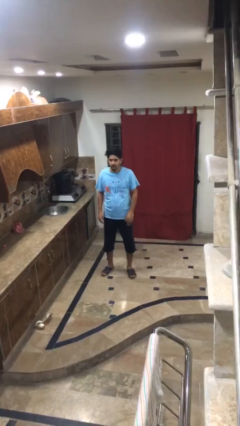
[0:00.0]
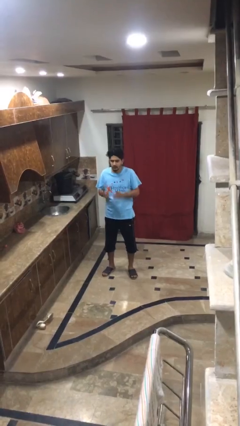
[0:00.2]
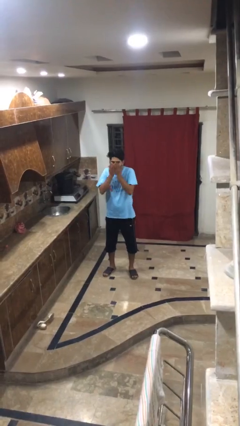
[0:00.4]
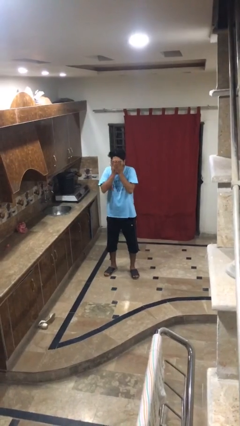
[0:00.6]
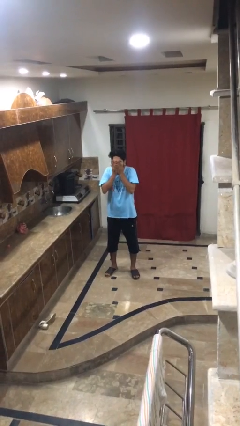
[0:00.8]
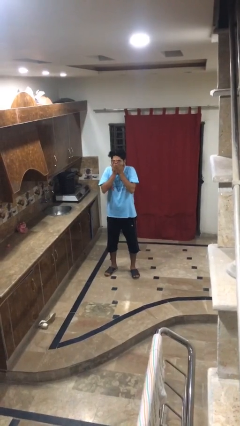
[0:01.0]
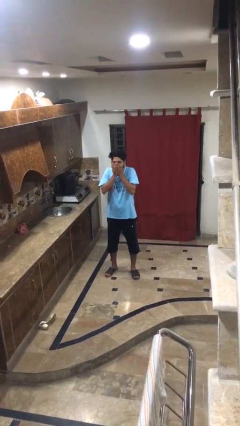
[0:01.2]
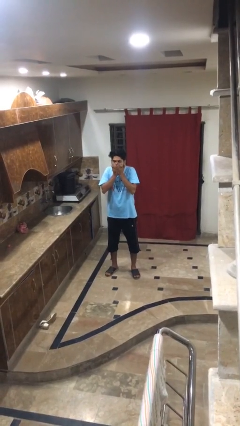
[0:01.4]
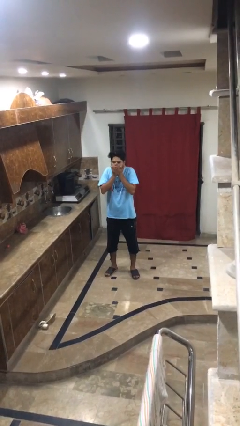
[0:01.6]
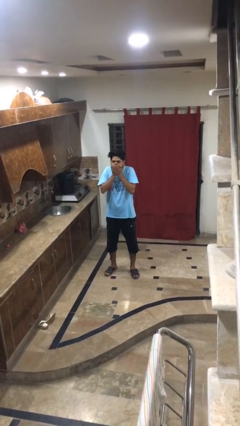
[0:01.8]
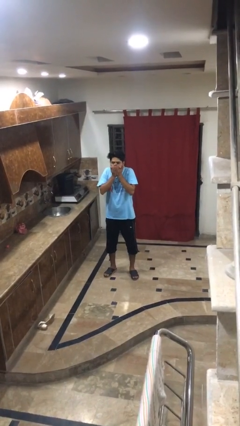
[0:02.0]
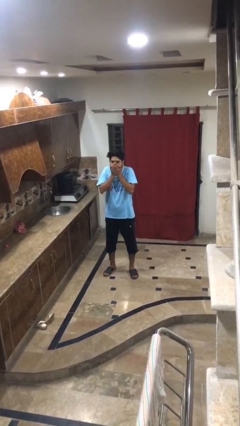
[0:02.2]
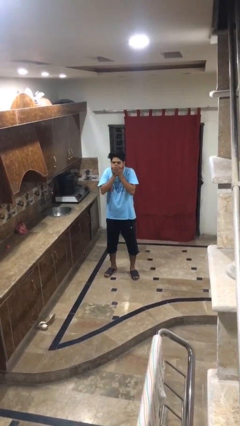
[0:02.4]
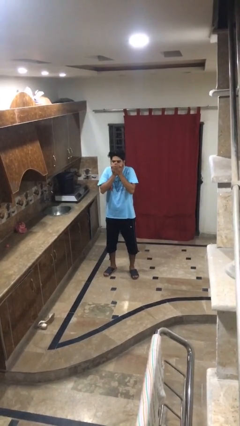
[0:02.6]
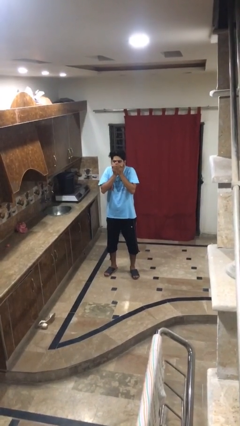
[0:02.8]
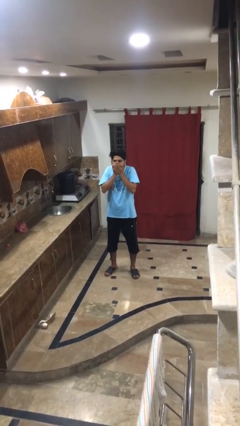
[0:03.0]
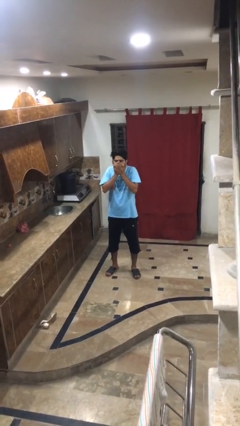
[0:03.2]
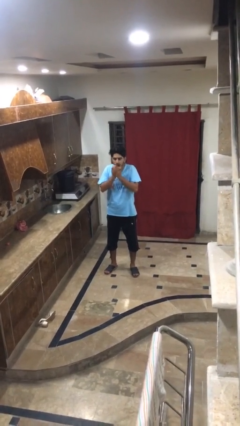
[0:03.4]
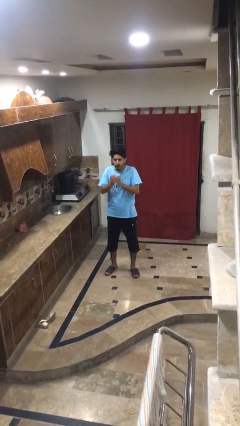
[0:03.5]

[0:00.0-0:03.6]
person sneezes into hand

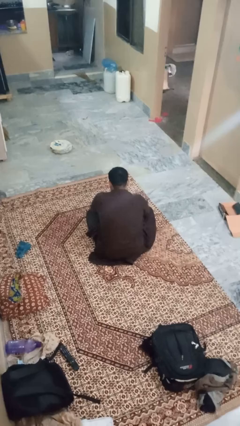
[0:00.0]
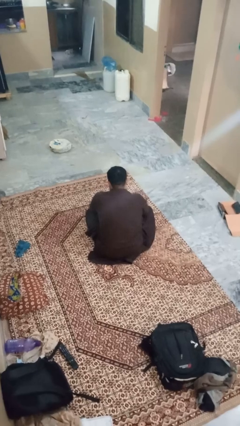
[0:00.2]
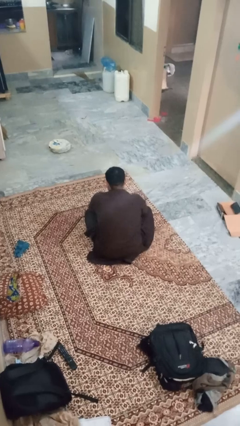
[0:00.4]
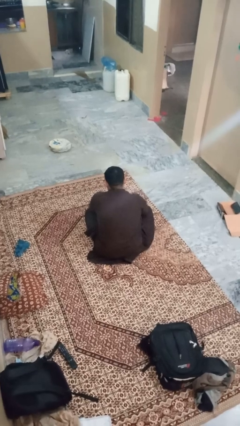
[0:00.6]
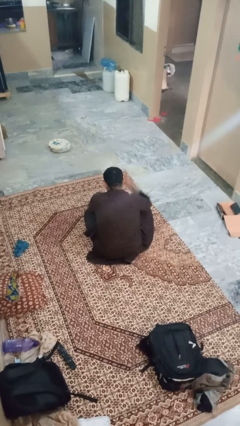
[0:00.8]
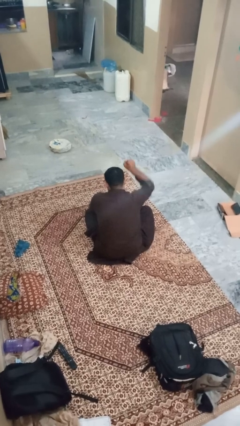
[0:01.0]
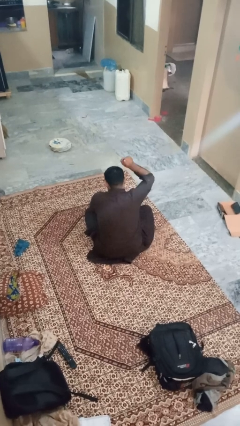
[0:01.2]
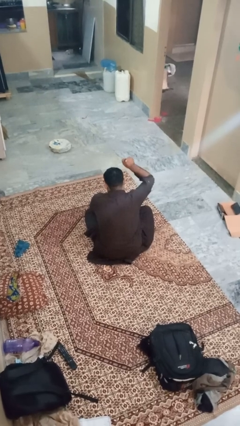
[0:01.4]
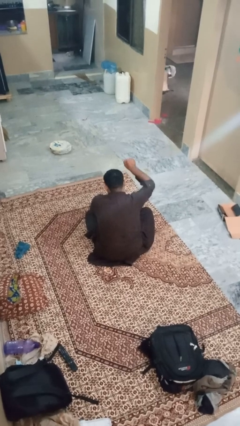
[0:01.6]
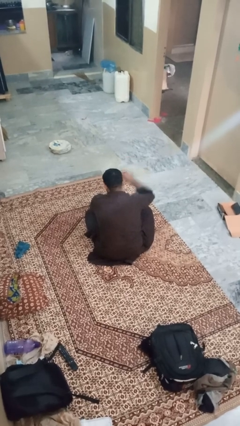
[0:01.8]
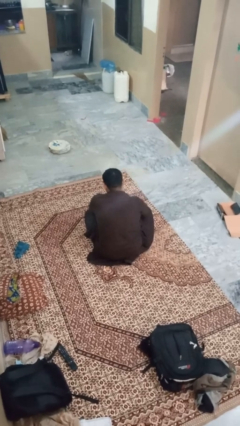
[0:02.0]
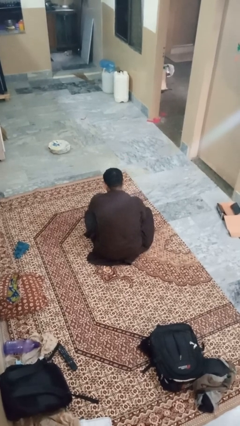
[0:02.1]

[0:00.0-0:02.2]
person gestures number one

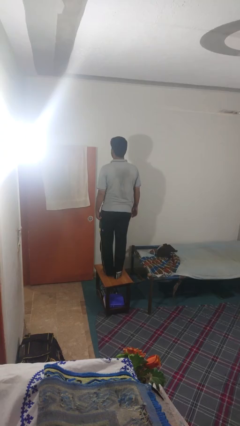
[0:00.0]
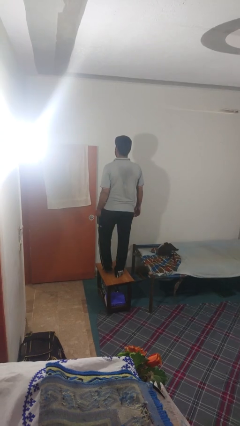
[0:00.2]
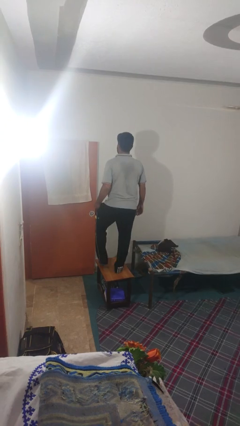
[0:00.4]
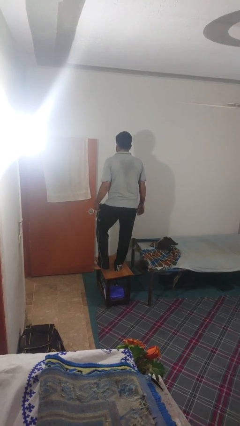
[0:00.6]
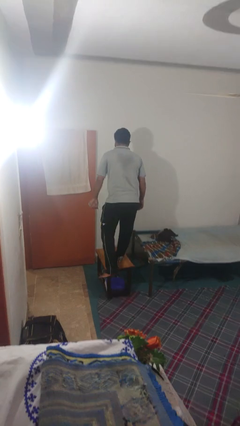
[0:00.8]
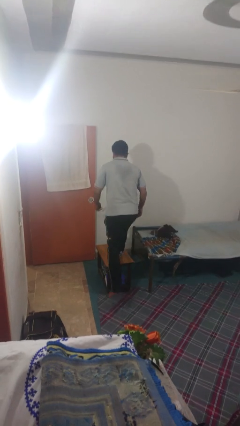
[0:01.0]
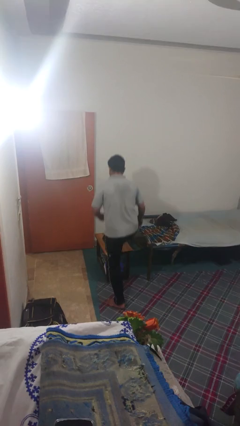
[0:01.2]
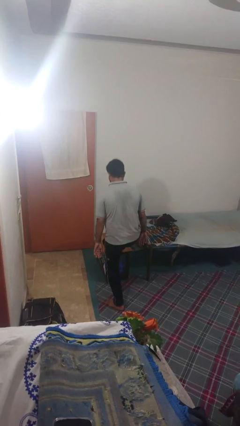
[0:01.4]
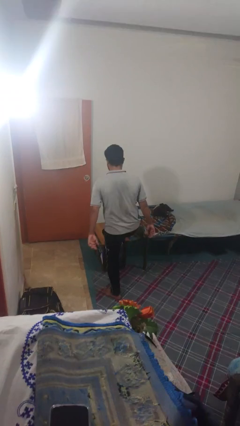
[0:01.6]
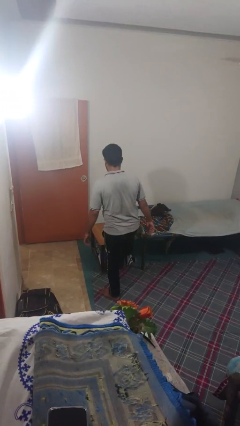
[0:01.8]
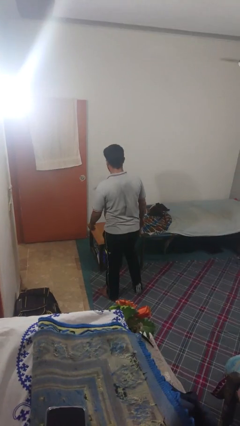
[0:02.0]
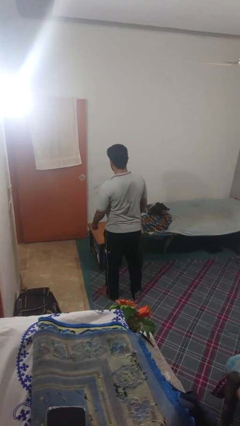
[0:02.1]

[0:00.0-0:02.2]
person climbs off table

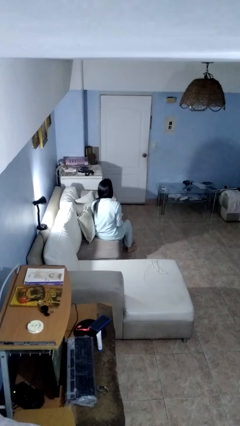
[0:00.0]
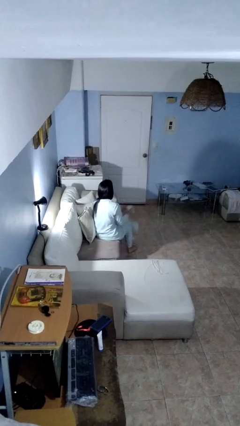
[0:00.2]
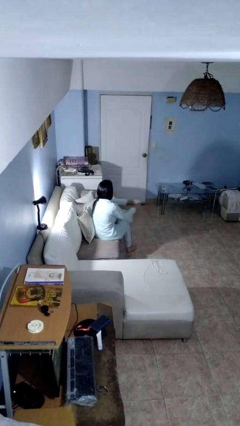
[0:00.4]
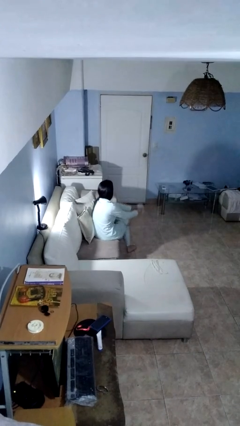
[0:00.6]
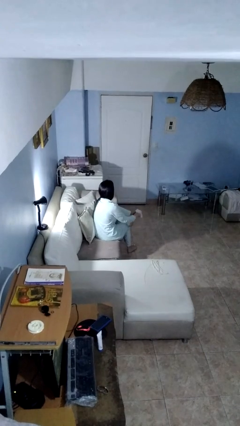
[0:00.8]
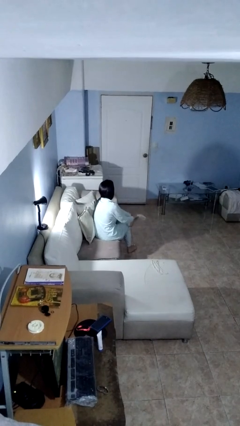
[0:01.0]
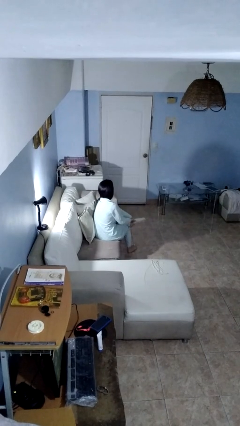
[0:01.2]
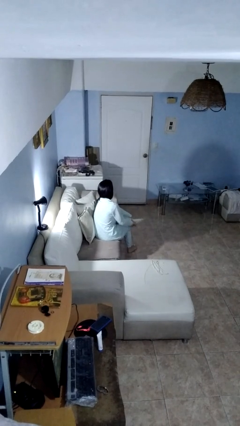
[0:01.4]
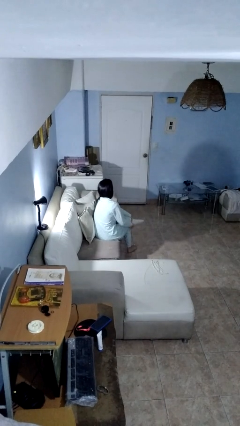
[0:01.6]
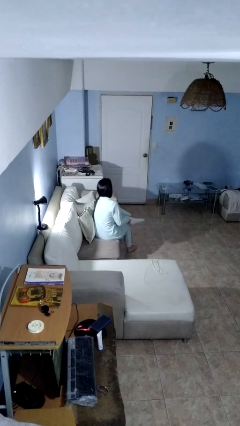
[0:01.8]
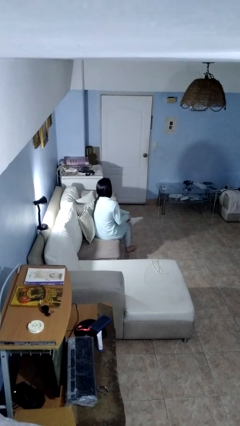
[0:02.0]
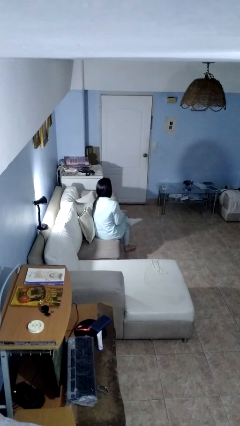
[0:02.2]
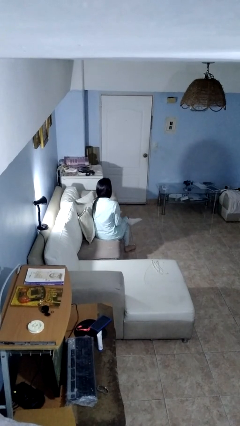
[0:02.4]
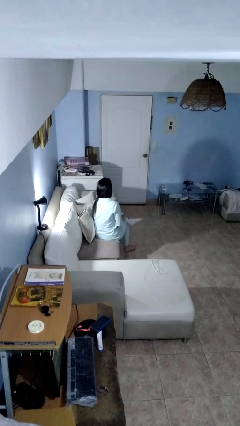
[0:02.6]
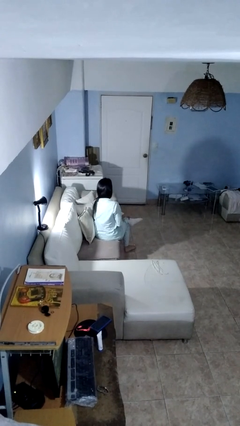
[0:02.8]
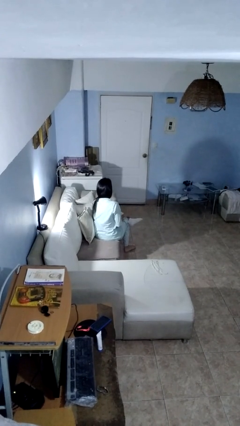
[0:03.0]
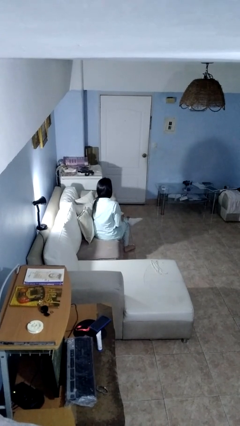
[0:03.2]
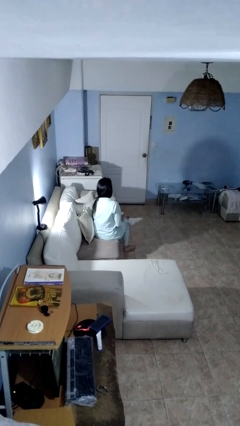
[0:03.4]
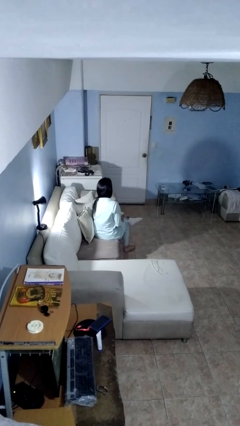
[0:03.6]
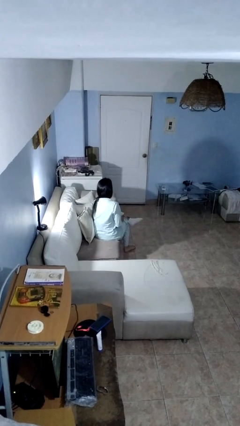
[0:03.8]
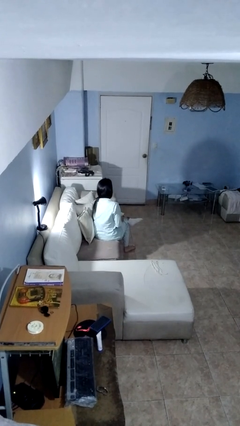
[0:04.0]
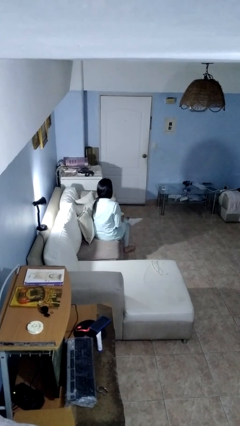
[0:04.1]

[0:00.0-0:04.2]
person puts on socks

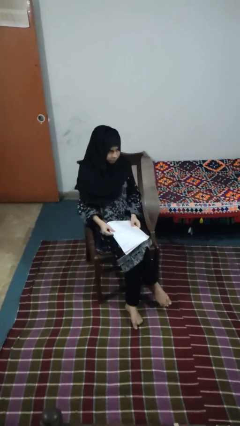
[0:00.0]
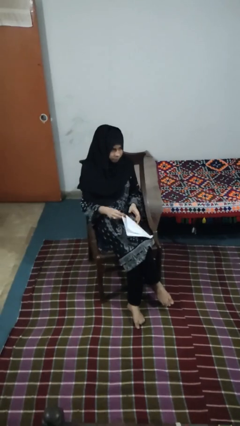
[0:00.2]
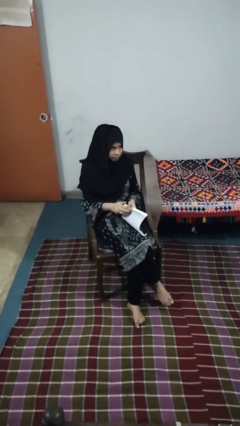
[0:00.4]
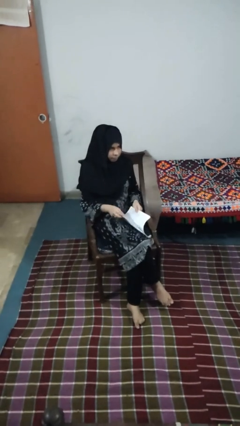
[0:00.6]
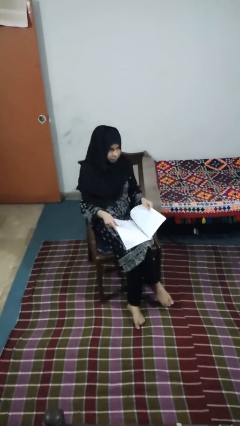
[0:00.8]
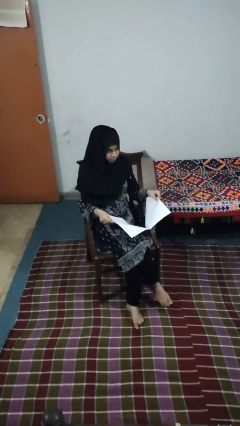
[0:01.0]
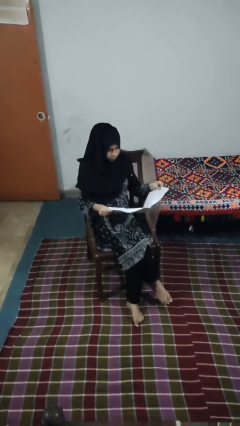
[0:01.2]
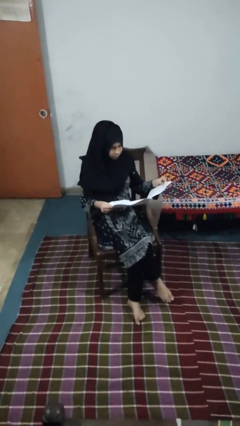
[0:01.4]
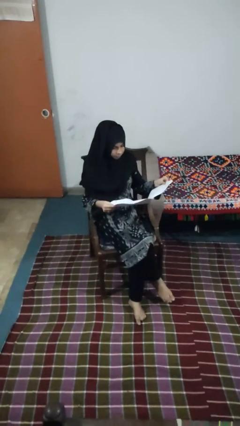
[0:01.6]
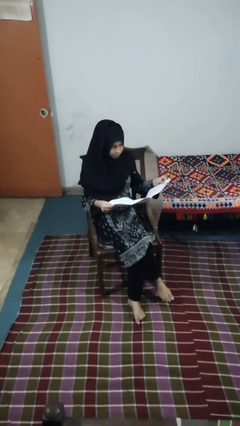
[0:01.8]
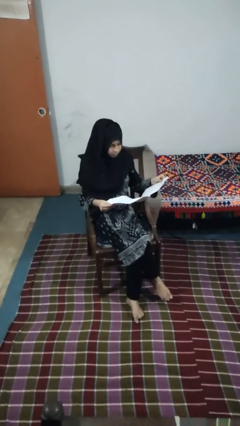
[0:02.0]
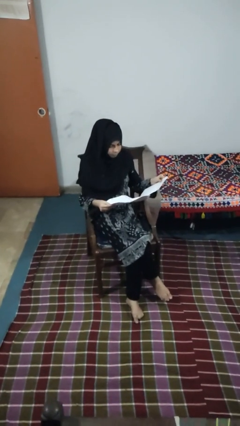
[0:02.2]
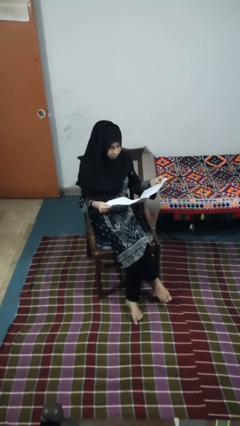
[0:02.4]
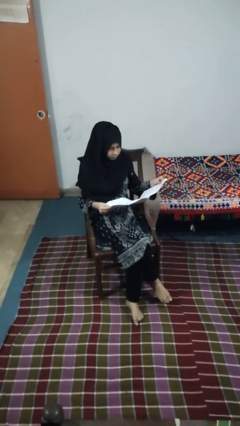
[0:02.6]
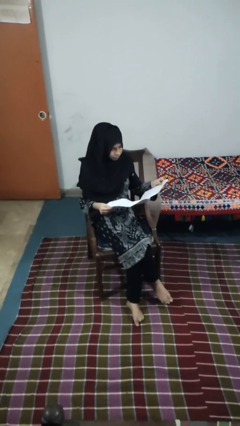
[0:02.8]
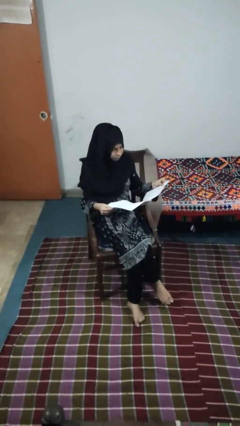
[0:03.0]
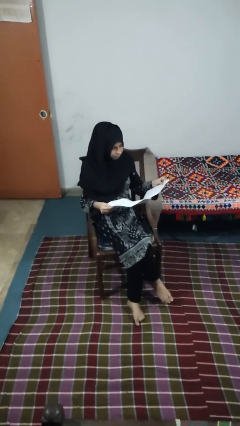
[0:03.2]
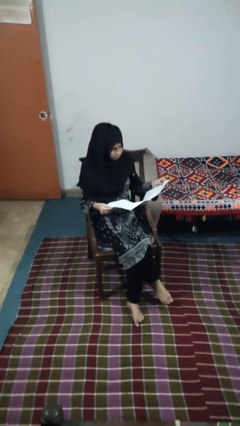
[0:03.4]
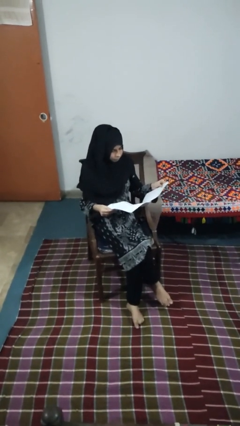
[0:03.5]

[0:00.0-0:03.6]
person reads newspaper

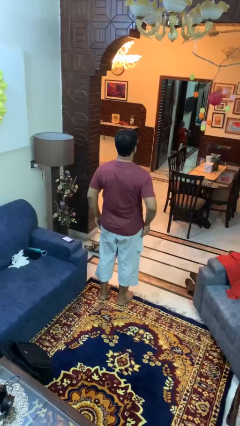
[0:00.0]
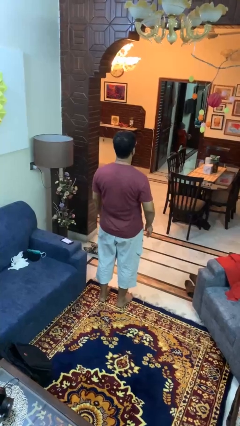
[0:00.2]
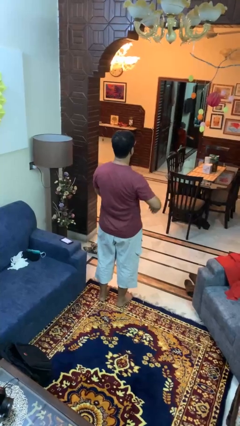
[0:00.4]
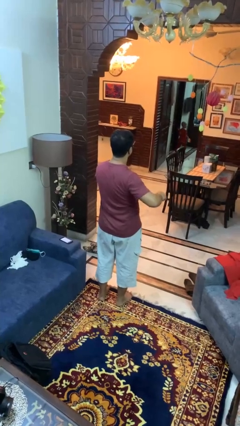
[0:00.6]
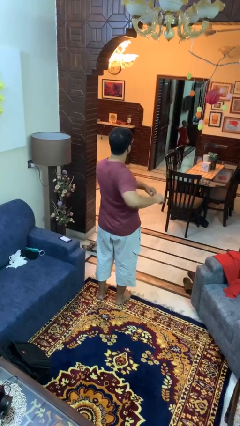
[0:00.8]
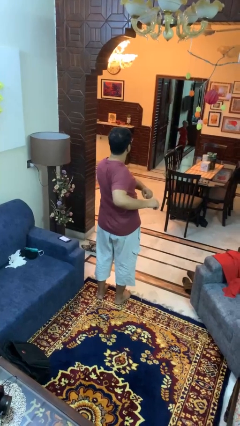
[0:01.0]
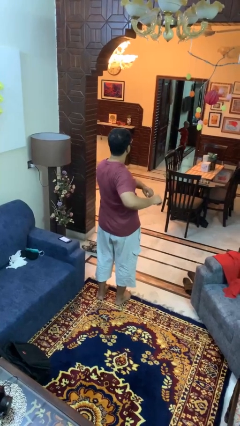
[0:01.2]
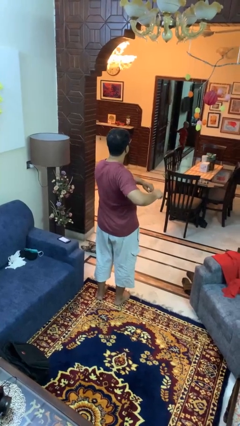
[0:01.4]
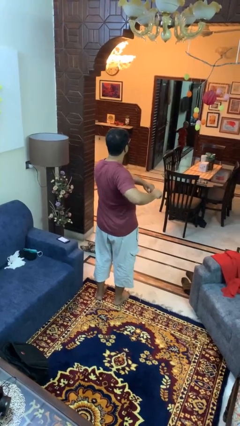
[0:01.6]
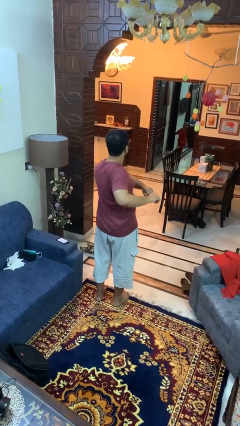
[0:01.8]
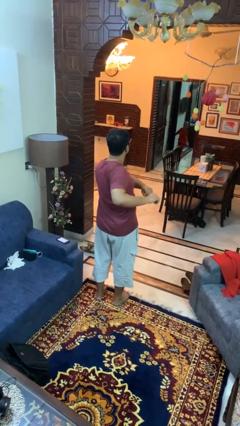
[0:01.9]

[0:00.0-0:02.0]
person stretches arms to side
